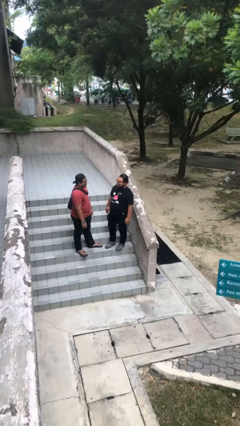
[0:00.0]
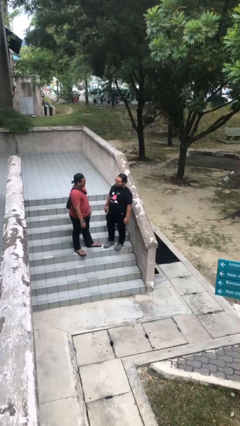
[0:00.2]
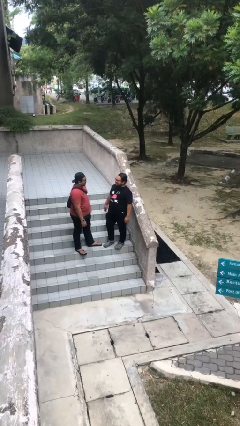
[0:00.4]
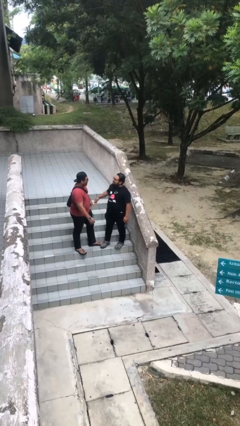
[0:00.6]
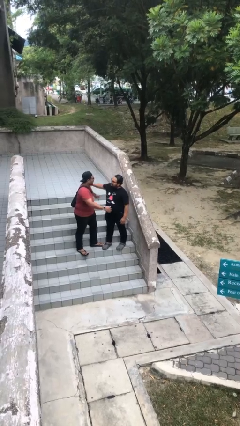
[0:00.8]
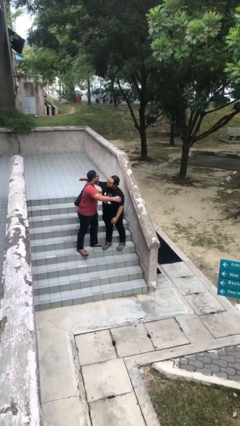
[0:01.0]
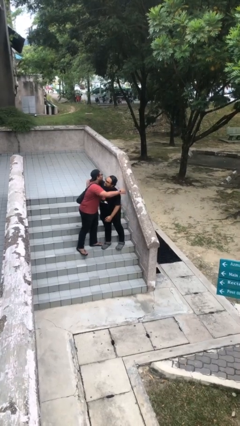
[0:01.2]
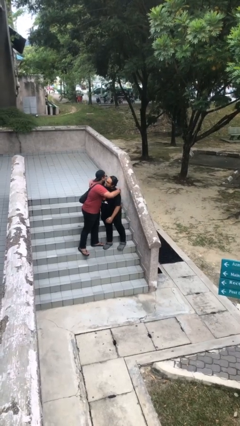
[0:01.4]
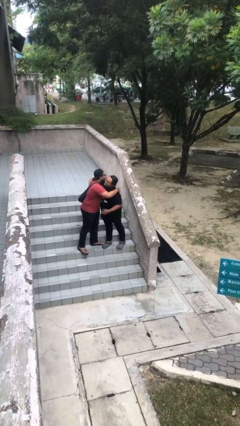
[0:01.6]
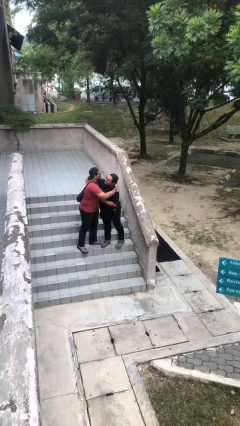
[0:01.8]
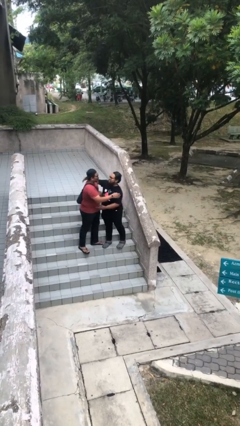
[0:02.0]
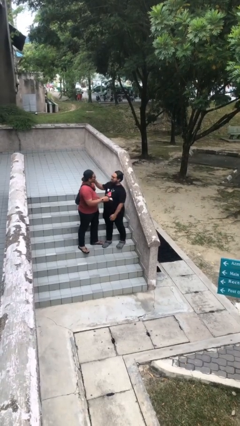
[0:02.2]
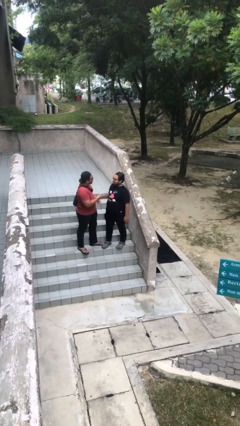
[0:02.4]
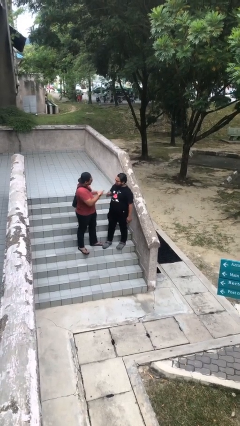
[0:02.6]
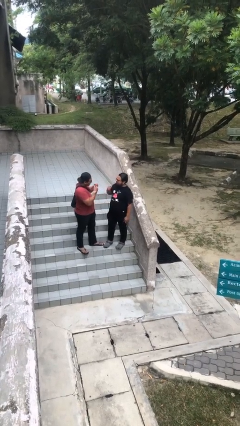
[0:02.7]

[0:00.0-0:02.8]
person embraces person

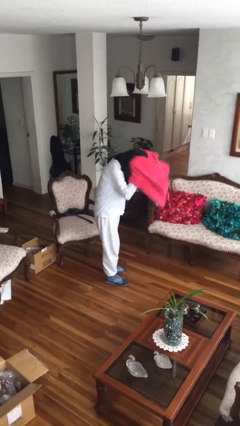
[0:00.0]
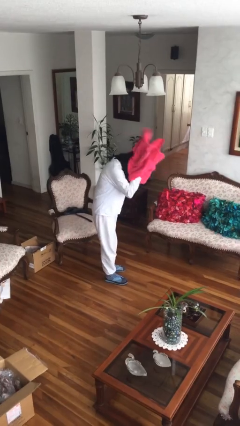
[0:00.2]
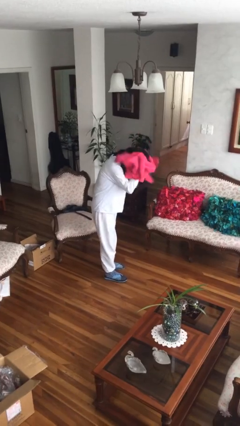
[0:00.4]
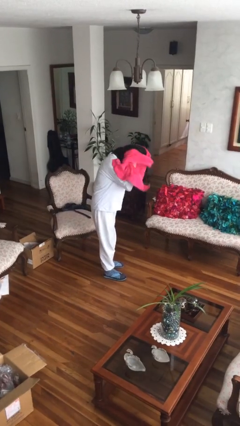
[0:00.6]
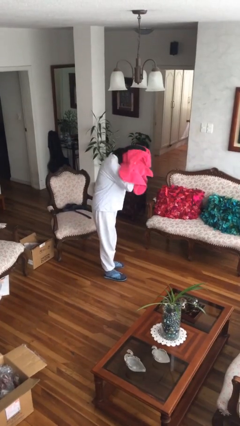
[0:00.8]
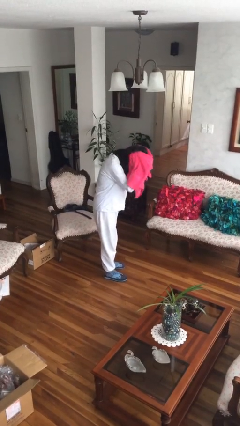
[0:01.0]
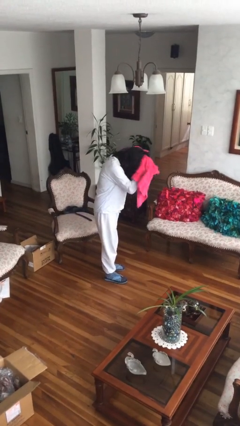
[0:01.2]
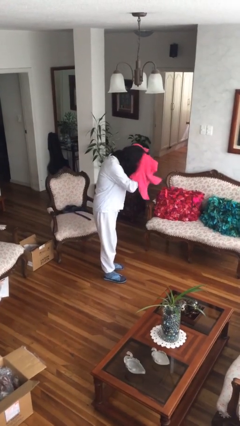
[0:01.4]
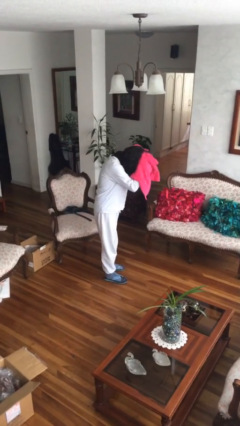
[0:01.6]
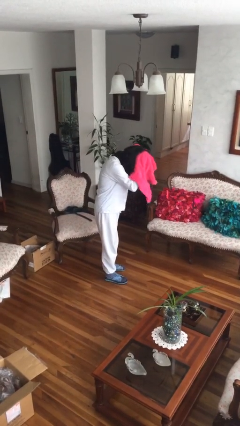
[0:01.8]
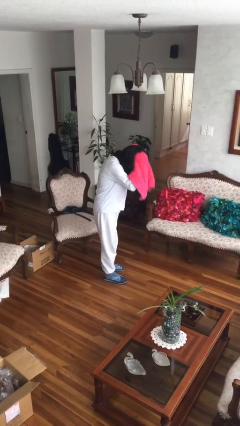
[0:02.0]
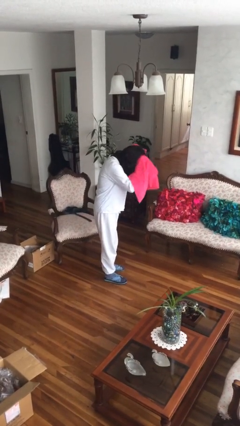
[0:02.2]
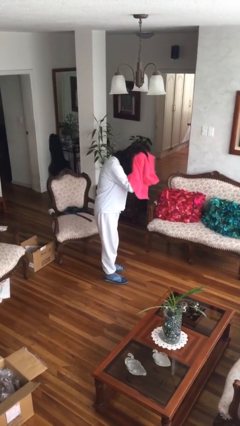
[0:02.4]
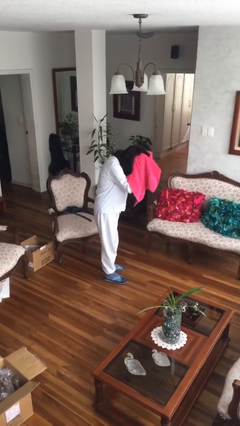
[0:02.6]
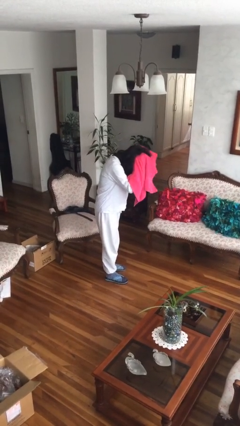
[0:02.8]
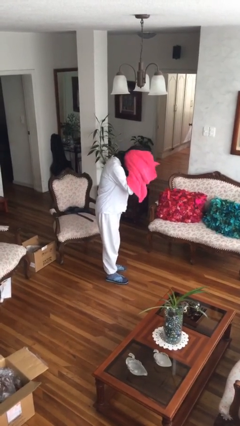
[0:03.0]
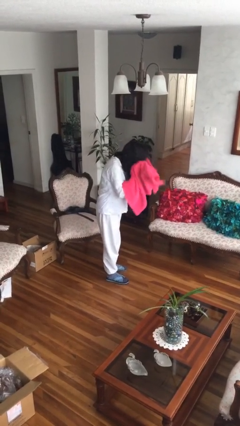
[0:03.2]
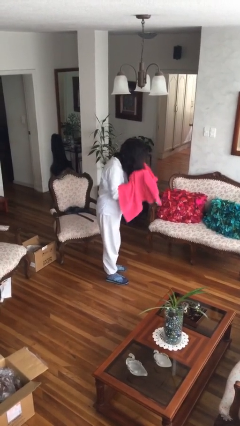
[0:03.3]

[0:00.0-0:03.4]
person dries hair with towel

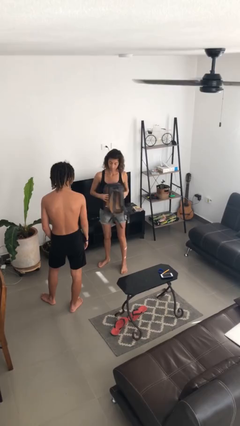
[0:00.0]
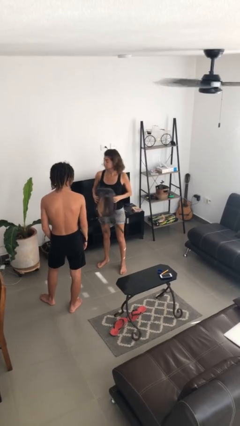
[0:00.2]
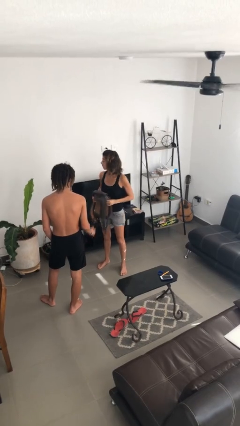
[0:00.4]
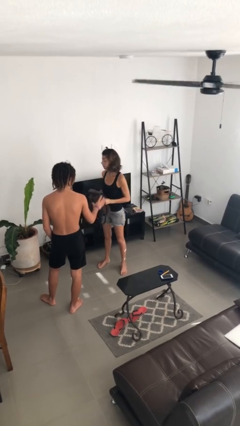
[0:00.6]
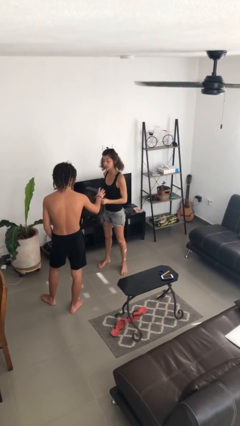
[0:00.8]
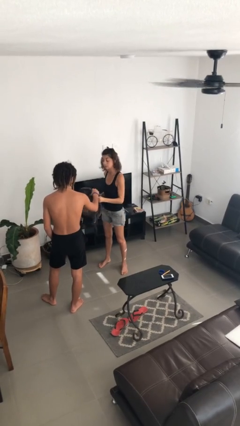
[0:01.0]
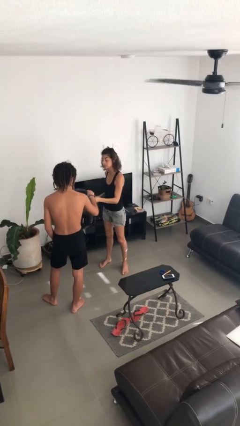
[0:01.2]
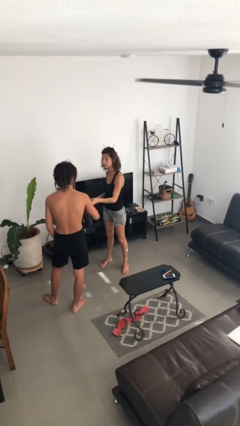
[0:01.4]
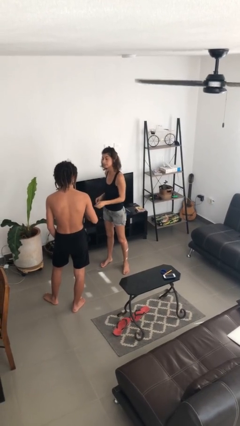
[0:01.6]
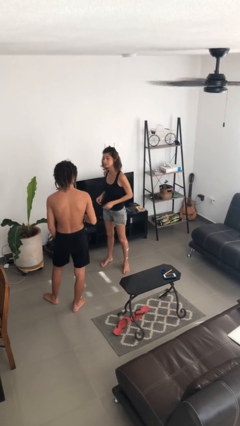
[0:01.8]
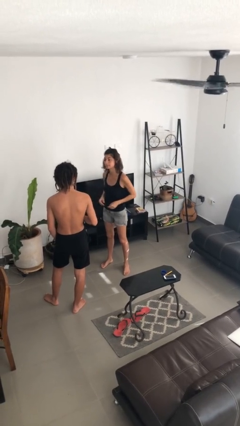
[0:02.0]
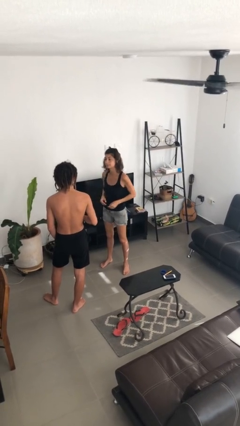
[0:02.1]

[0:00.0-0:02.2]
person transfers object to person

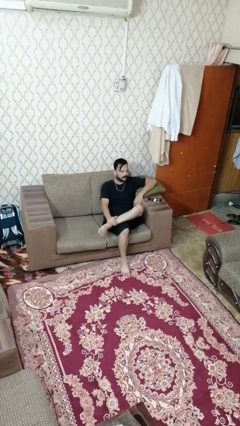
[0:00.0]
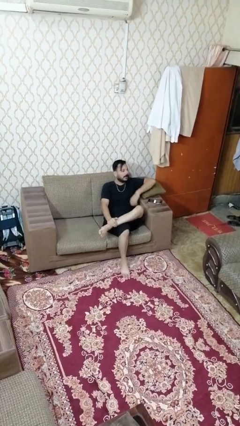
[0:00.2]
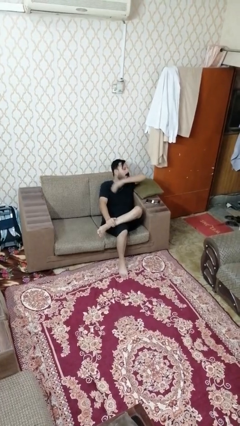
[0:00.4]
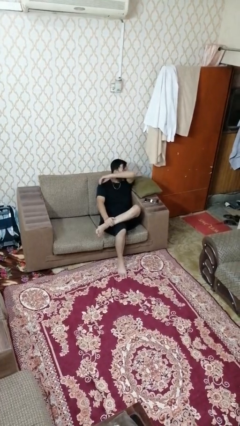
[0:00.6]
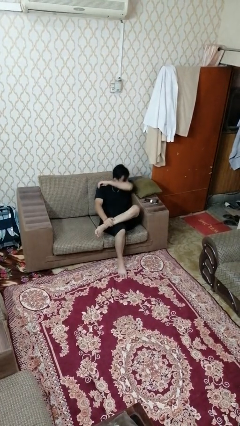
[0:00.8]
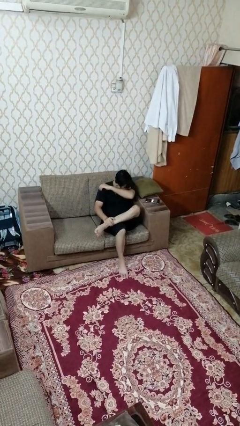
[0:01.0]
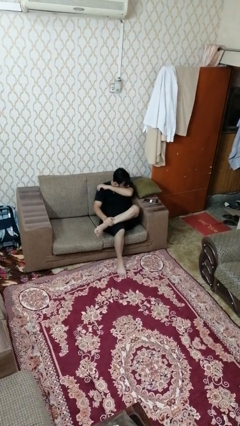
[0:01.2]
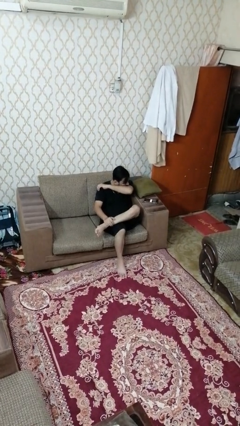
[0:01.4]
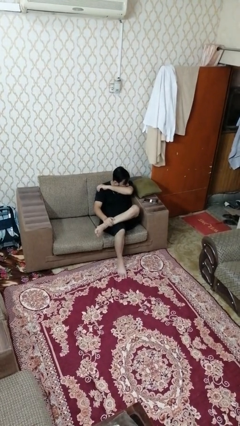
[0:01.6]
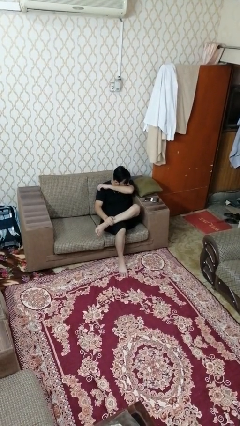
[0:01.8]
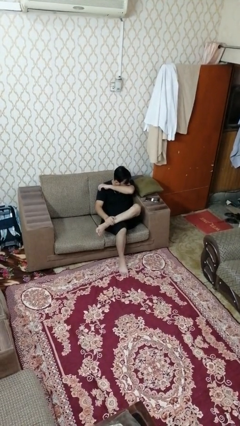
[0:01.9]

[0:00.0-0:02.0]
person sneezes into arm

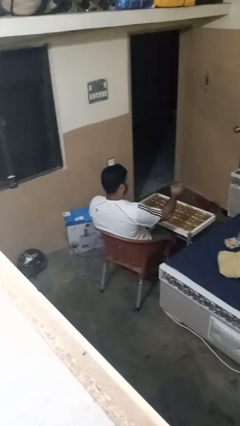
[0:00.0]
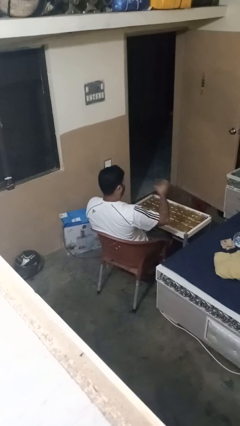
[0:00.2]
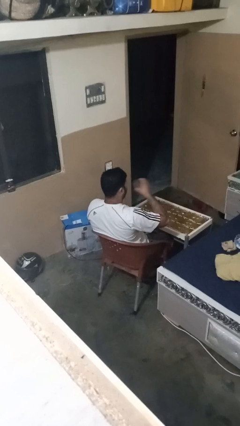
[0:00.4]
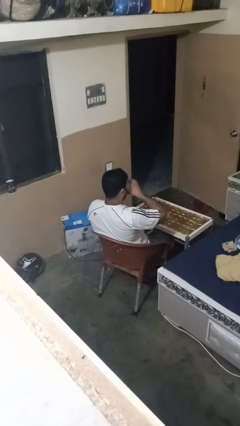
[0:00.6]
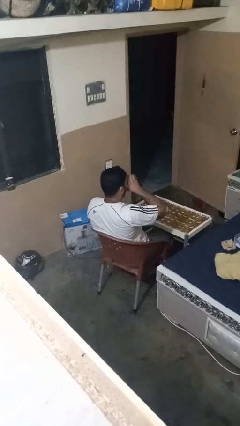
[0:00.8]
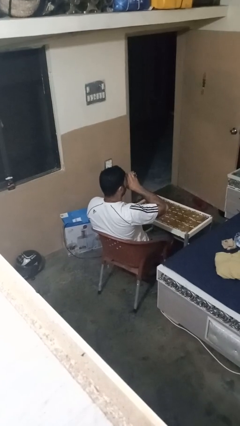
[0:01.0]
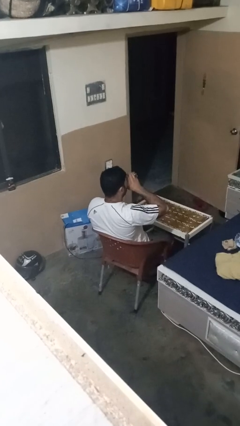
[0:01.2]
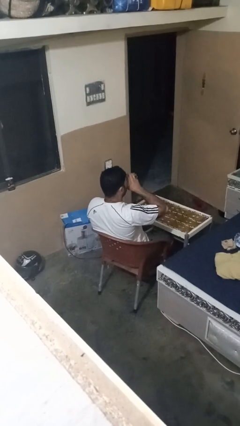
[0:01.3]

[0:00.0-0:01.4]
person drinks from shotglass

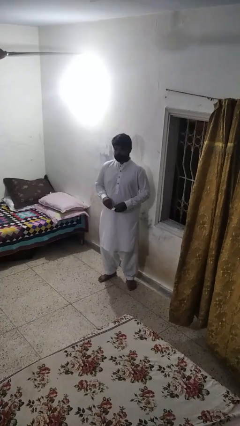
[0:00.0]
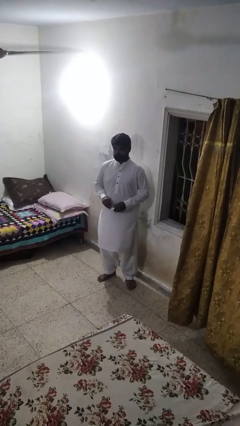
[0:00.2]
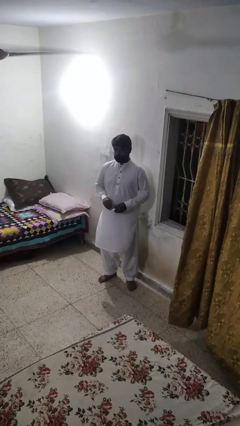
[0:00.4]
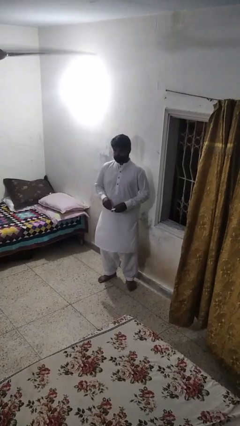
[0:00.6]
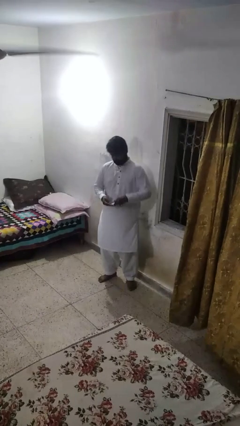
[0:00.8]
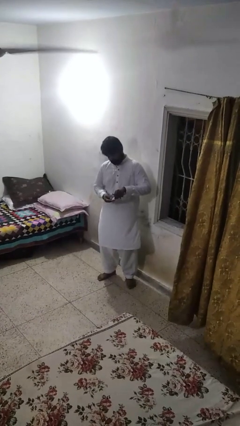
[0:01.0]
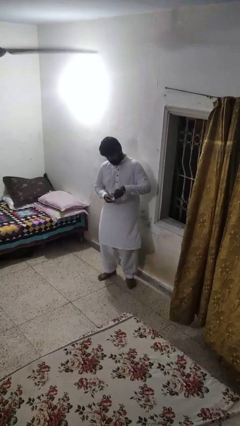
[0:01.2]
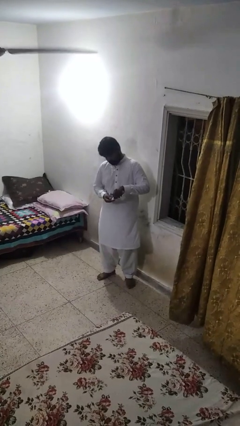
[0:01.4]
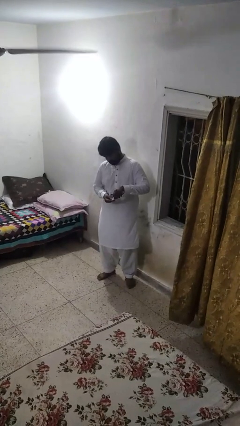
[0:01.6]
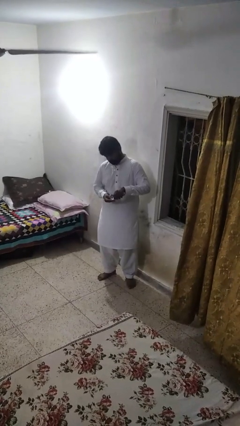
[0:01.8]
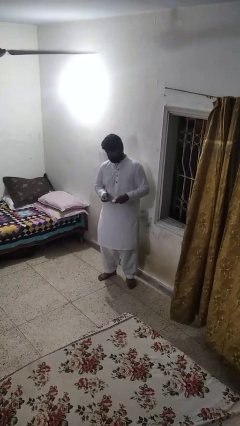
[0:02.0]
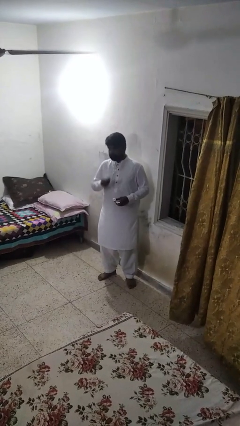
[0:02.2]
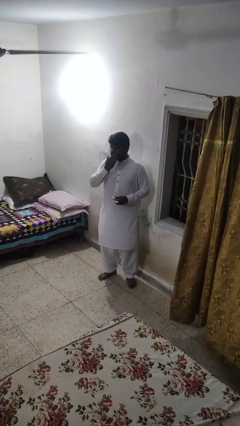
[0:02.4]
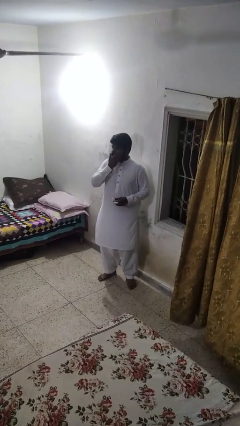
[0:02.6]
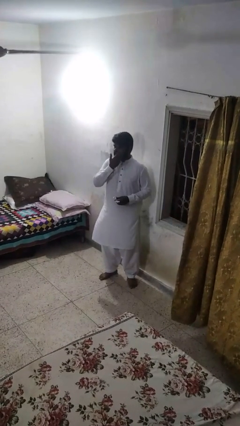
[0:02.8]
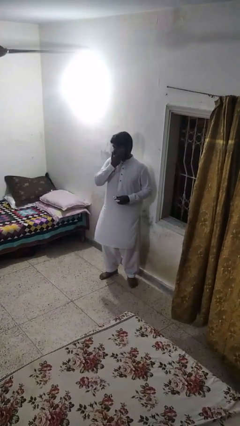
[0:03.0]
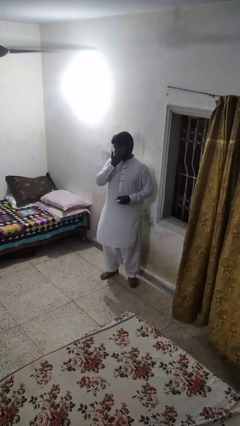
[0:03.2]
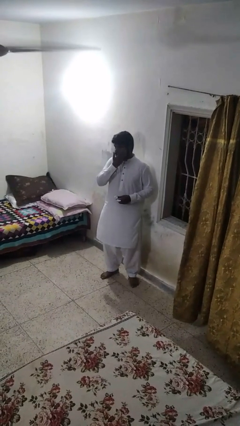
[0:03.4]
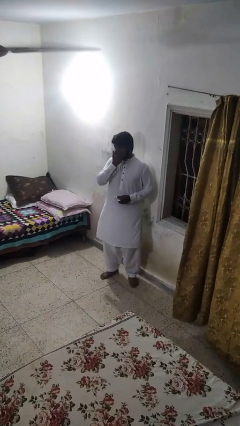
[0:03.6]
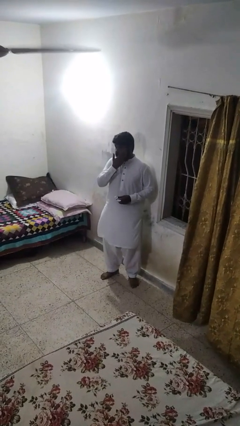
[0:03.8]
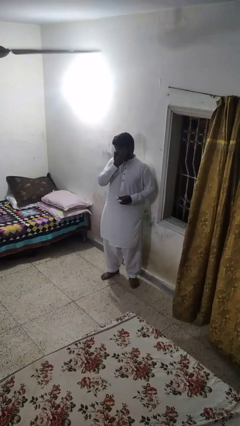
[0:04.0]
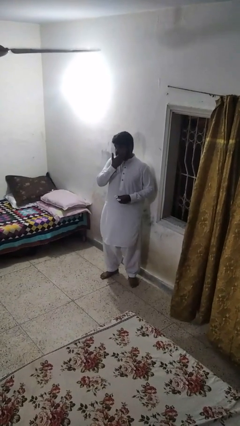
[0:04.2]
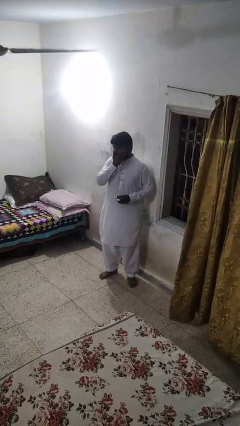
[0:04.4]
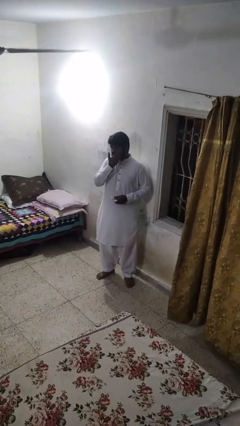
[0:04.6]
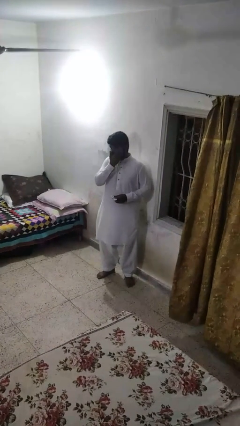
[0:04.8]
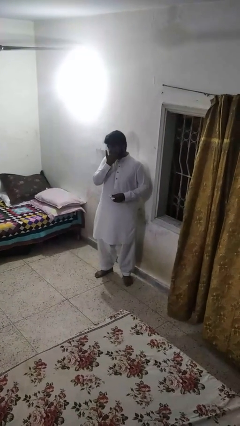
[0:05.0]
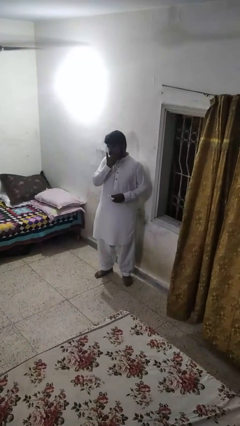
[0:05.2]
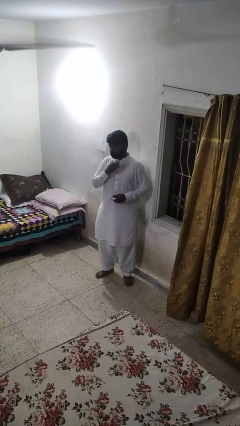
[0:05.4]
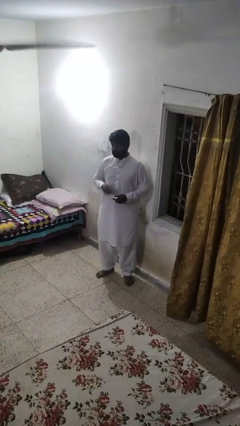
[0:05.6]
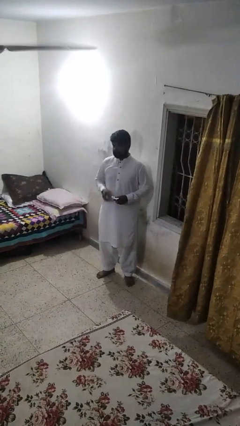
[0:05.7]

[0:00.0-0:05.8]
person applies shaving cream
